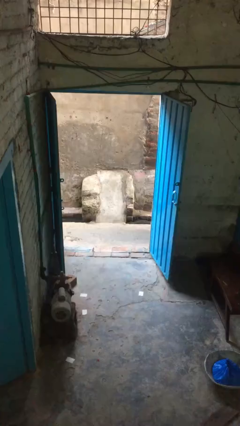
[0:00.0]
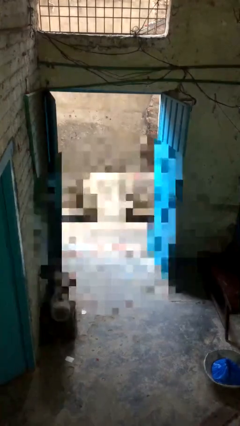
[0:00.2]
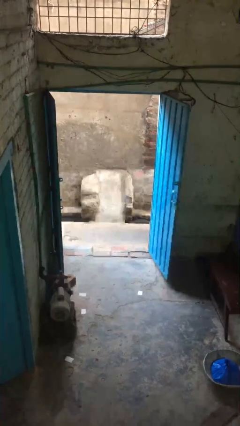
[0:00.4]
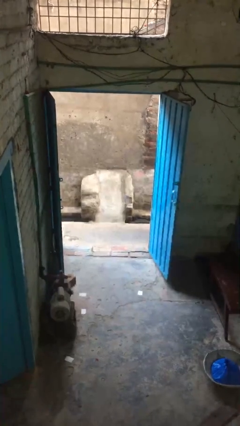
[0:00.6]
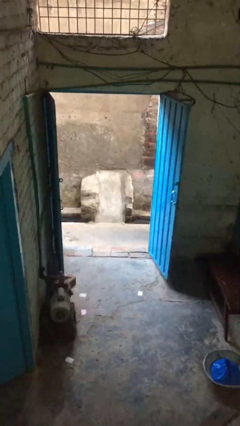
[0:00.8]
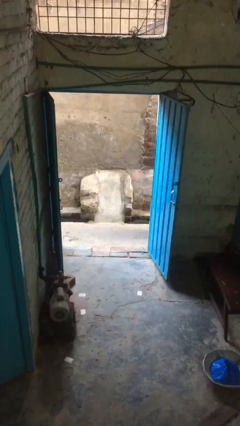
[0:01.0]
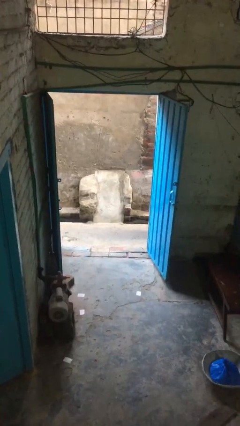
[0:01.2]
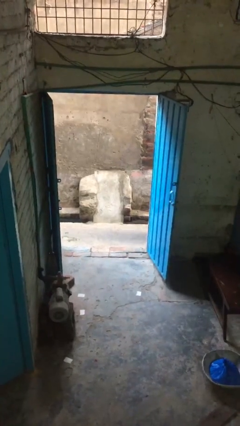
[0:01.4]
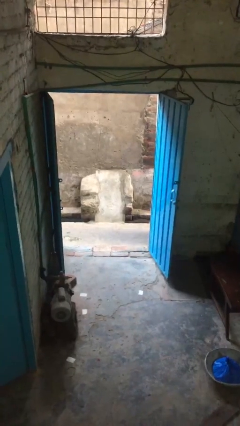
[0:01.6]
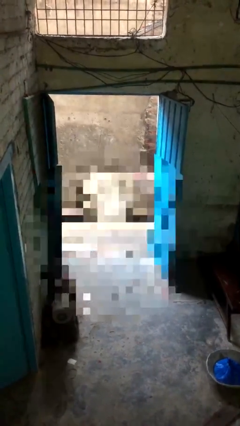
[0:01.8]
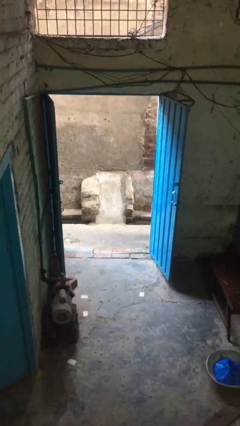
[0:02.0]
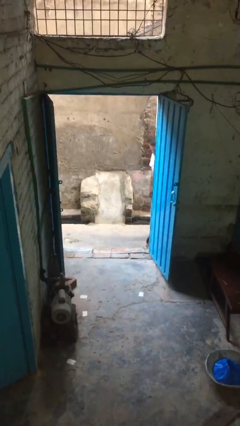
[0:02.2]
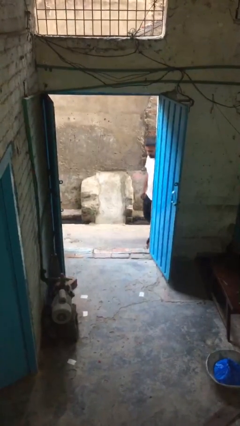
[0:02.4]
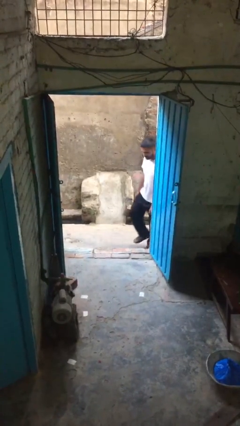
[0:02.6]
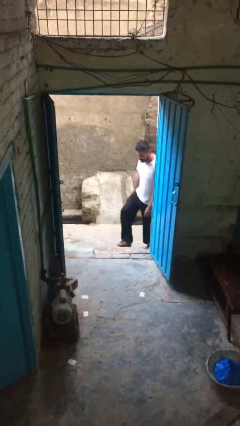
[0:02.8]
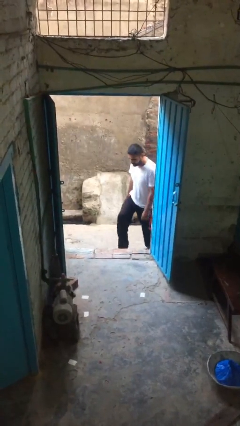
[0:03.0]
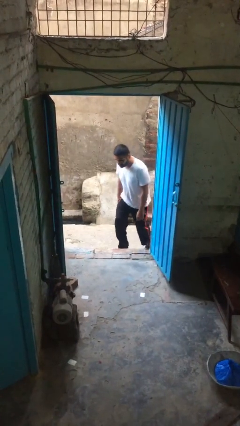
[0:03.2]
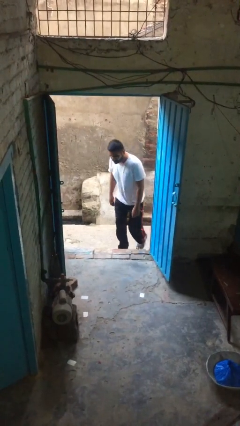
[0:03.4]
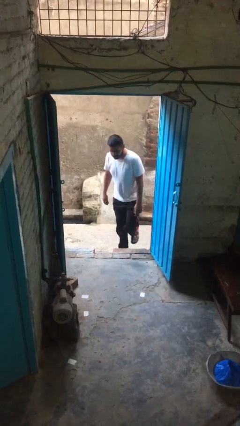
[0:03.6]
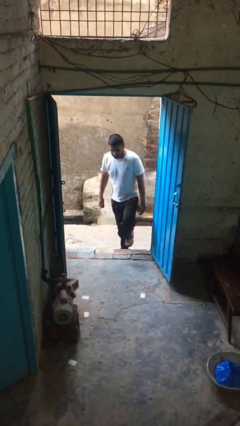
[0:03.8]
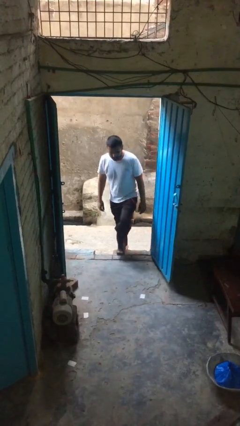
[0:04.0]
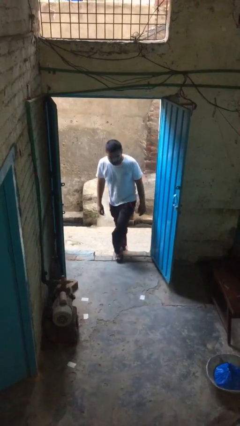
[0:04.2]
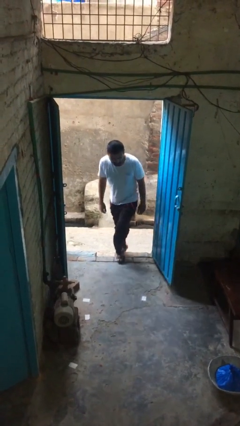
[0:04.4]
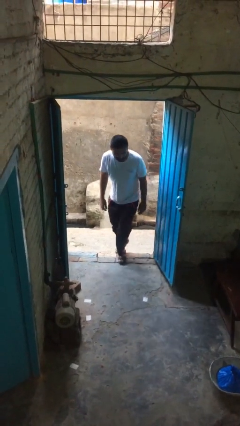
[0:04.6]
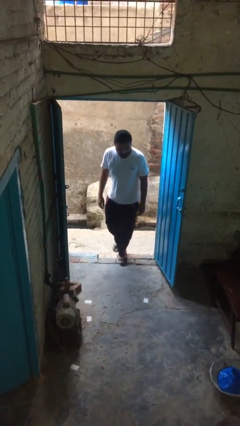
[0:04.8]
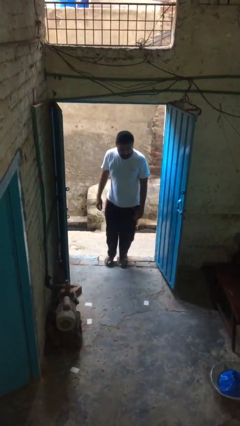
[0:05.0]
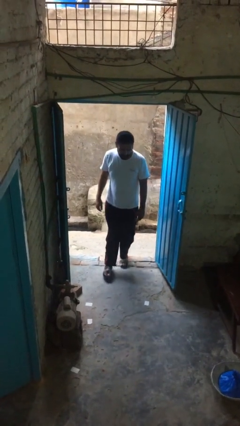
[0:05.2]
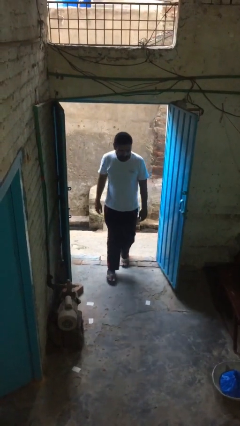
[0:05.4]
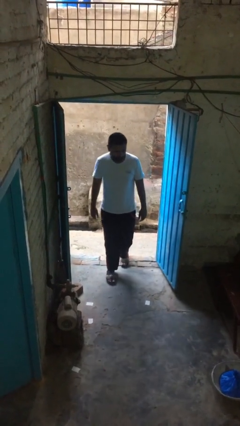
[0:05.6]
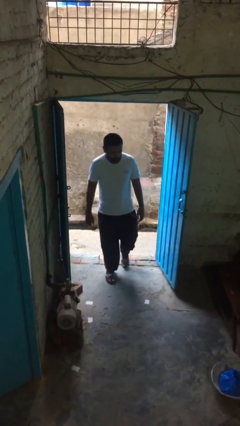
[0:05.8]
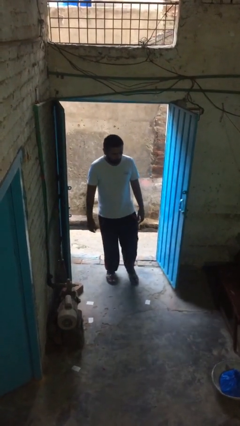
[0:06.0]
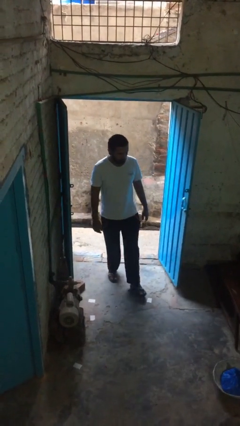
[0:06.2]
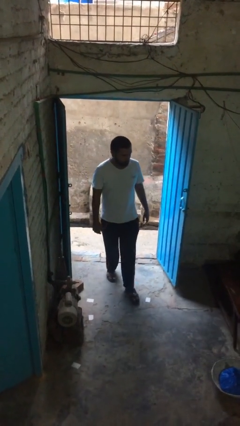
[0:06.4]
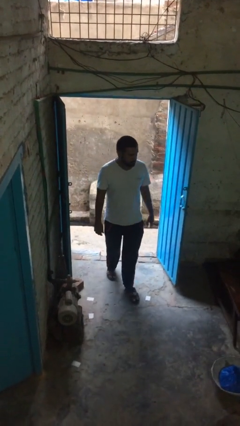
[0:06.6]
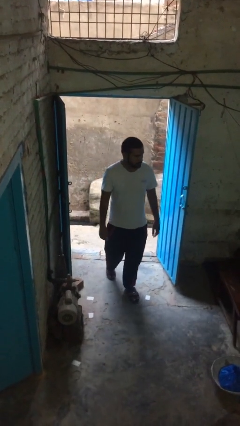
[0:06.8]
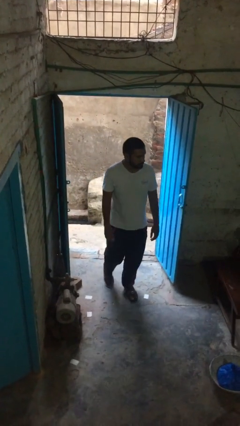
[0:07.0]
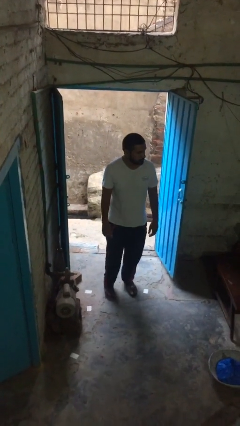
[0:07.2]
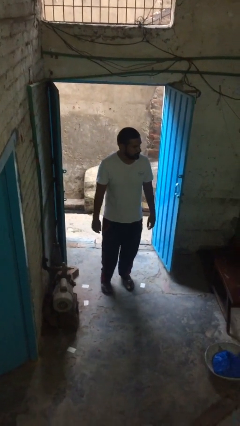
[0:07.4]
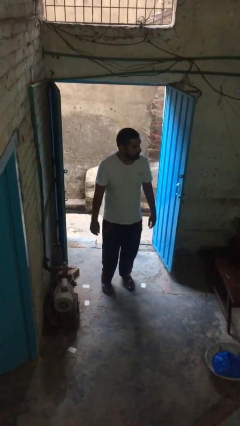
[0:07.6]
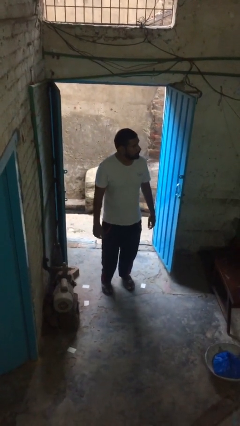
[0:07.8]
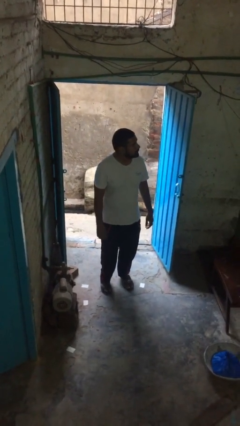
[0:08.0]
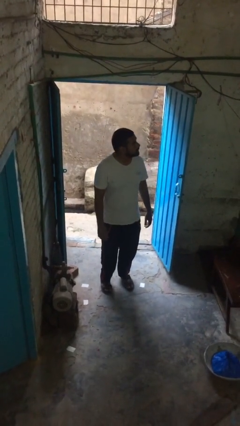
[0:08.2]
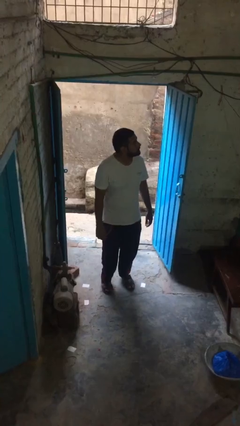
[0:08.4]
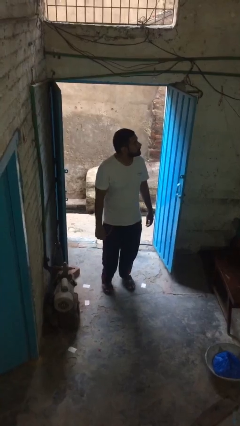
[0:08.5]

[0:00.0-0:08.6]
person enters scene through structure

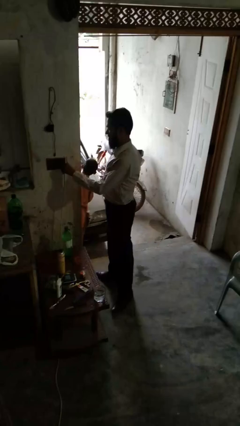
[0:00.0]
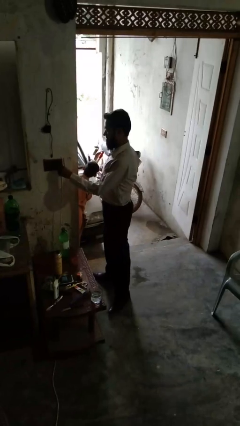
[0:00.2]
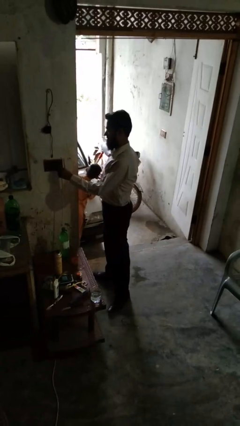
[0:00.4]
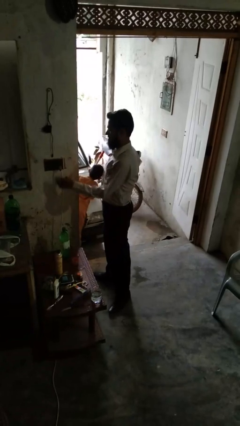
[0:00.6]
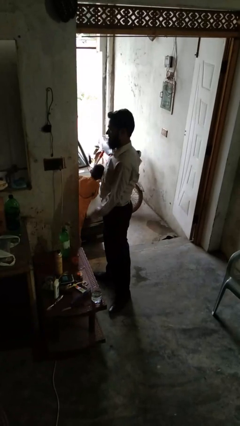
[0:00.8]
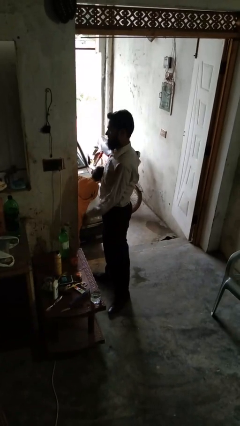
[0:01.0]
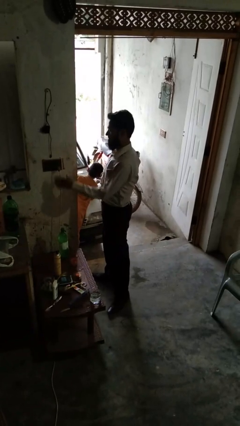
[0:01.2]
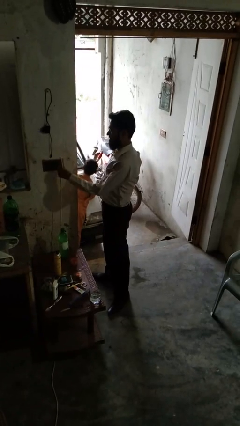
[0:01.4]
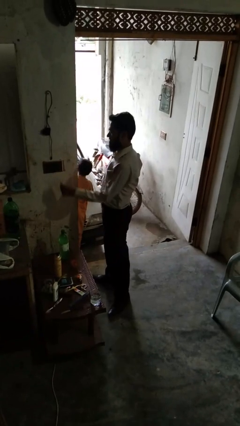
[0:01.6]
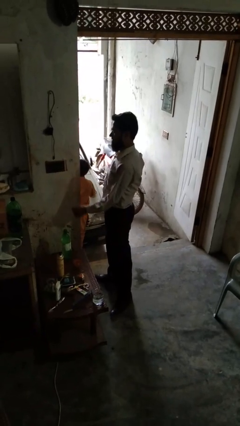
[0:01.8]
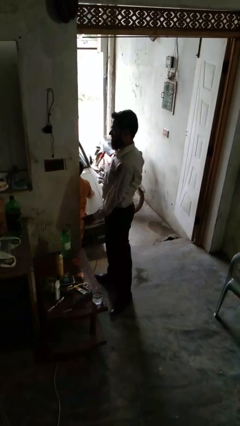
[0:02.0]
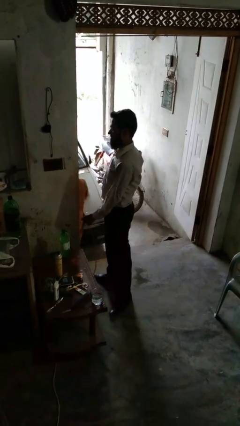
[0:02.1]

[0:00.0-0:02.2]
person unplugs from electrical socket

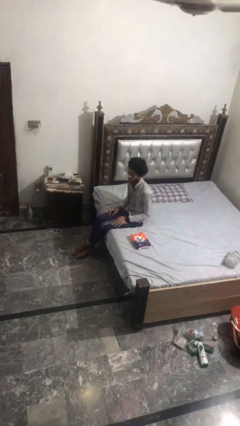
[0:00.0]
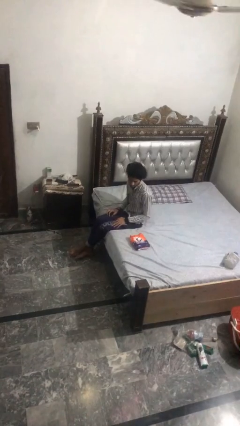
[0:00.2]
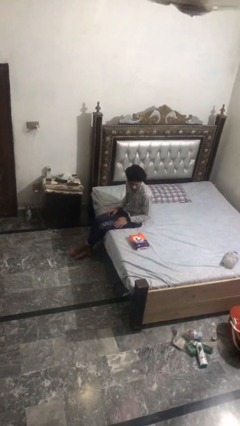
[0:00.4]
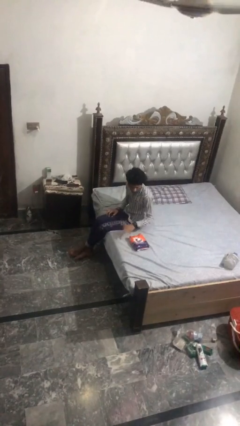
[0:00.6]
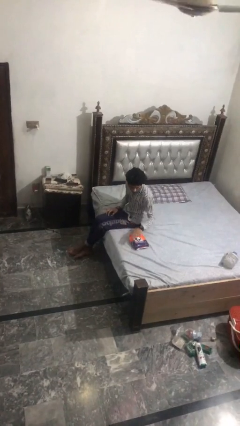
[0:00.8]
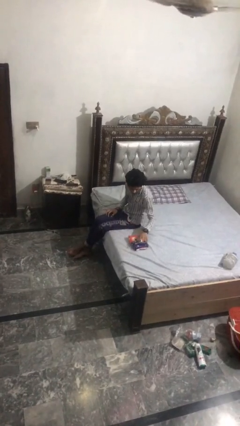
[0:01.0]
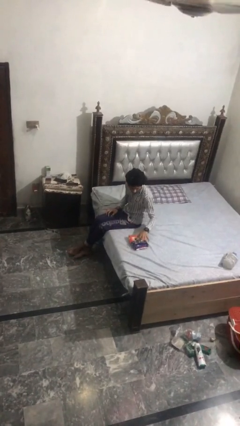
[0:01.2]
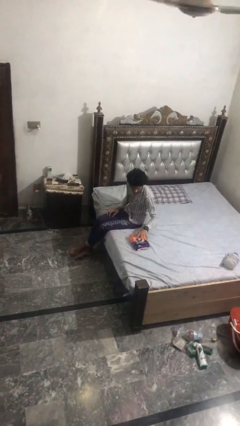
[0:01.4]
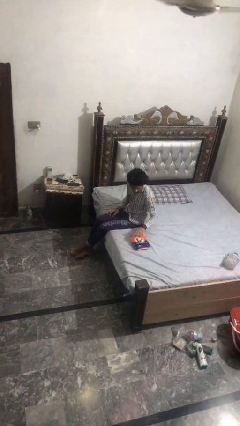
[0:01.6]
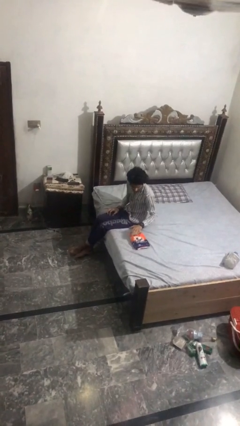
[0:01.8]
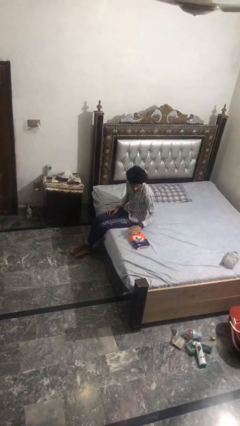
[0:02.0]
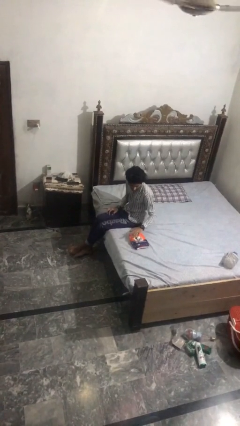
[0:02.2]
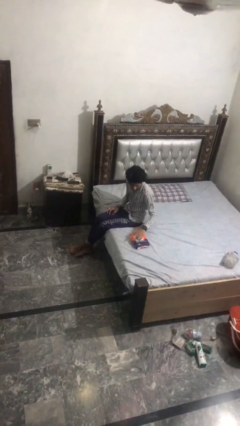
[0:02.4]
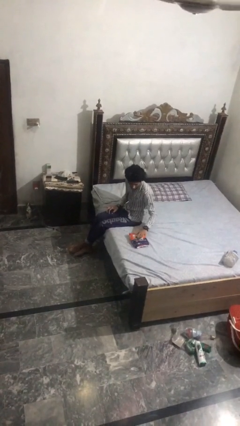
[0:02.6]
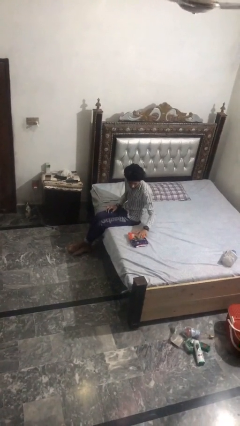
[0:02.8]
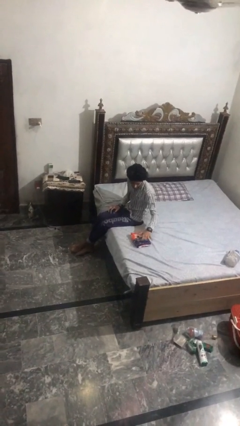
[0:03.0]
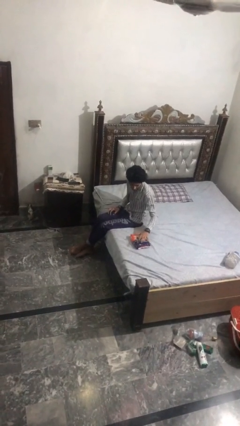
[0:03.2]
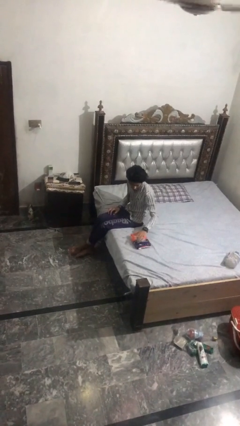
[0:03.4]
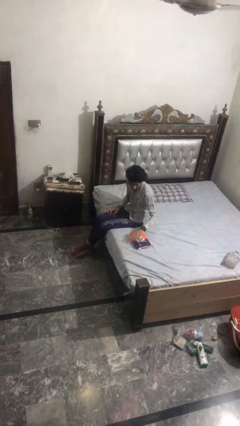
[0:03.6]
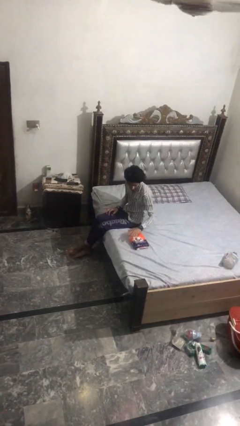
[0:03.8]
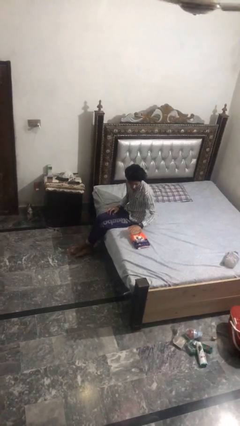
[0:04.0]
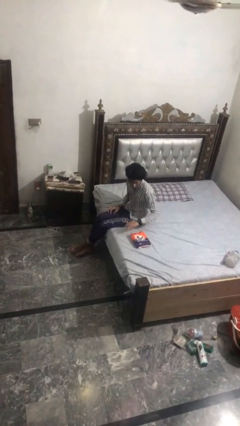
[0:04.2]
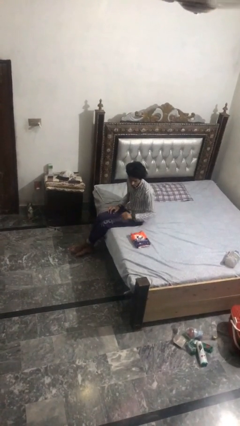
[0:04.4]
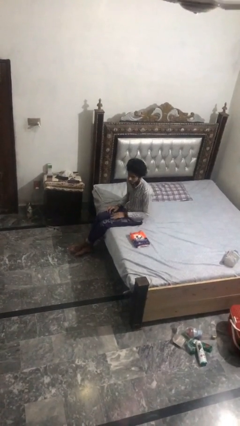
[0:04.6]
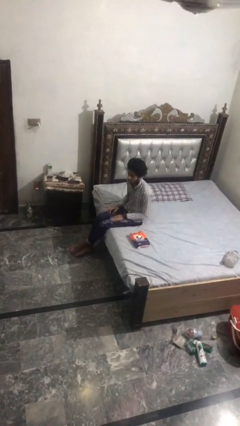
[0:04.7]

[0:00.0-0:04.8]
person waves hand over object

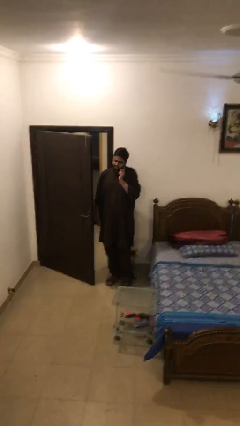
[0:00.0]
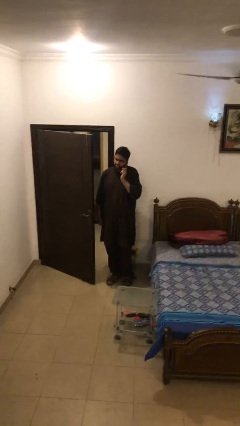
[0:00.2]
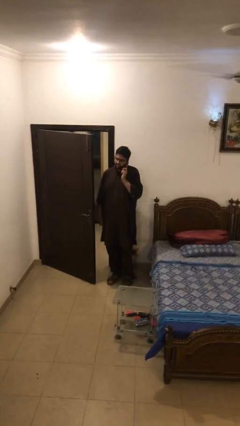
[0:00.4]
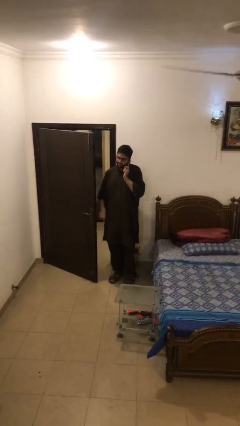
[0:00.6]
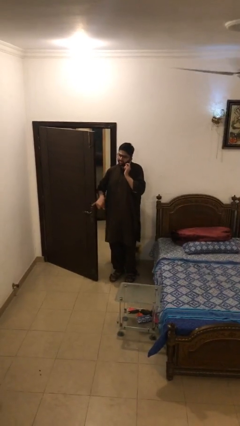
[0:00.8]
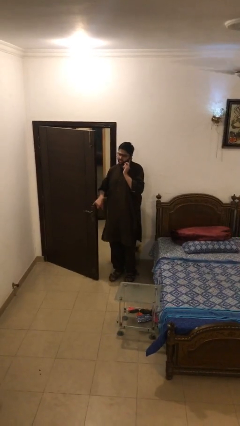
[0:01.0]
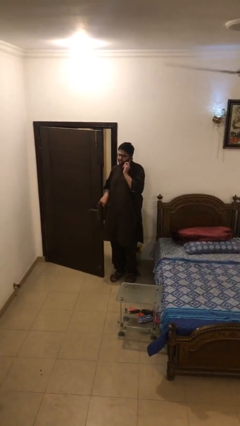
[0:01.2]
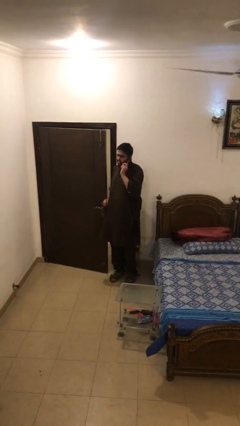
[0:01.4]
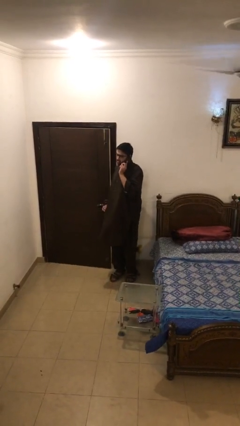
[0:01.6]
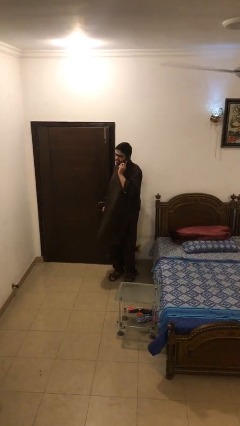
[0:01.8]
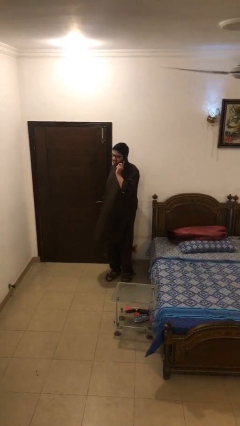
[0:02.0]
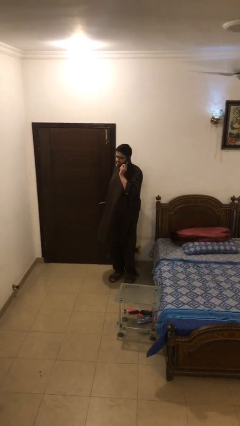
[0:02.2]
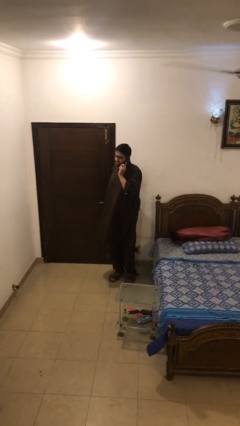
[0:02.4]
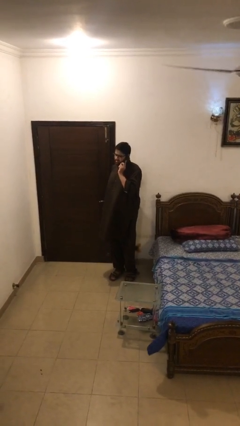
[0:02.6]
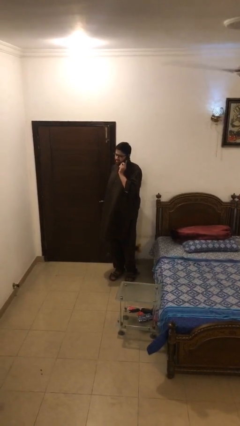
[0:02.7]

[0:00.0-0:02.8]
person closes facility door
